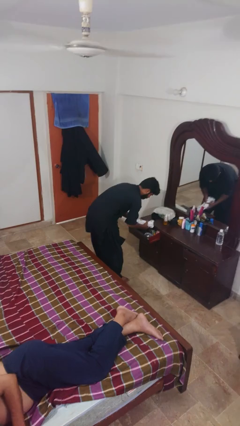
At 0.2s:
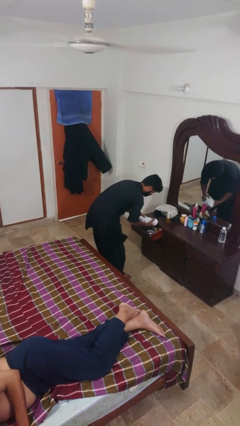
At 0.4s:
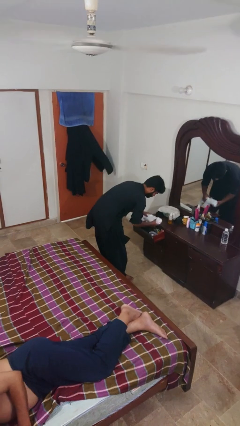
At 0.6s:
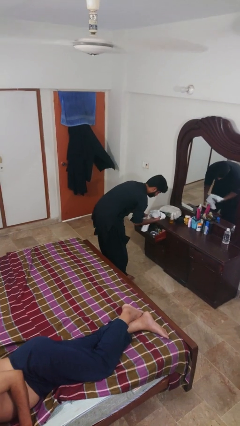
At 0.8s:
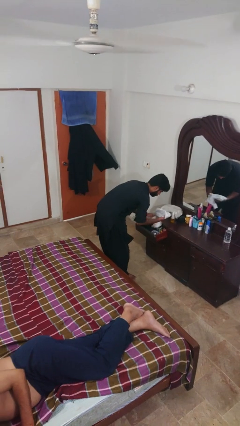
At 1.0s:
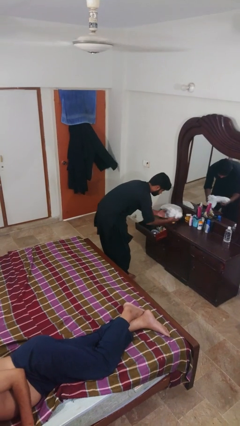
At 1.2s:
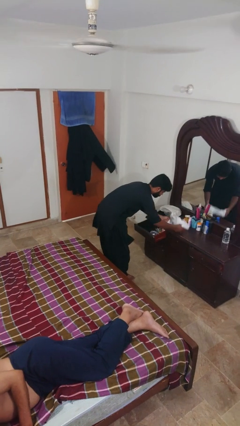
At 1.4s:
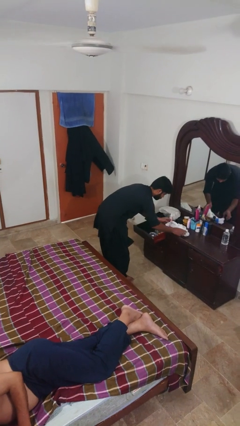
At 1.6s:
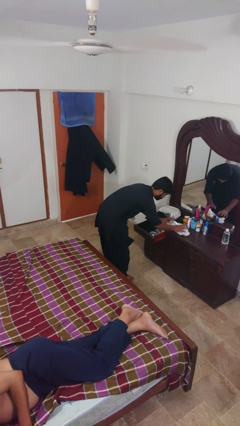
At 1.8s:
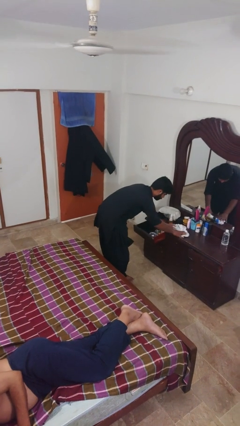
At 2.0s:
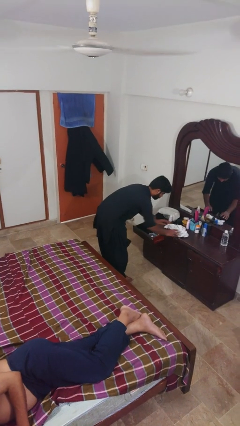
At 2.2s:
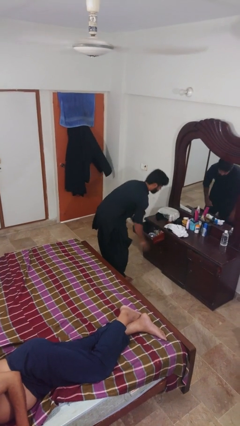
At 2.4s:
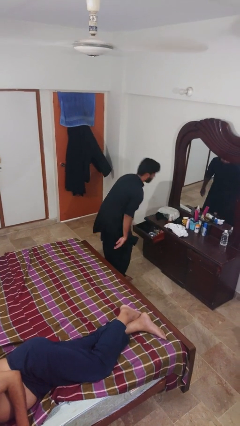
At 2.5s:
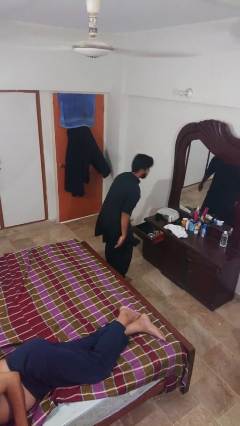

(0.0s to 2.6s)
person takes clothes from dresser

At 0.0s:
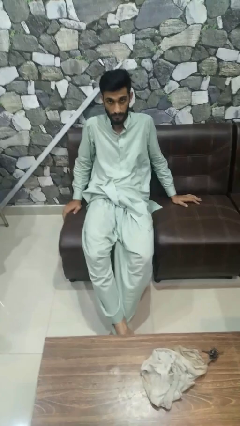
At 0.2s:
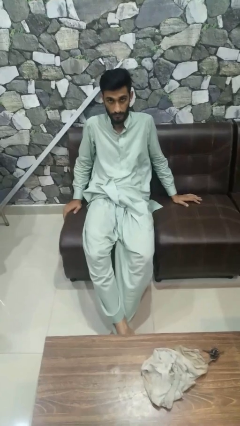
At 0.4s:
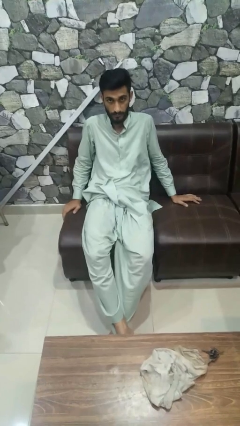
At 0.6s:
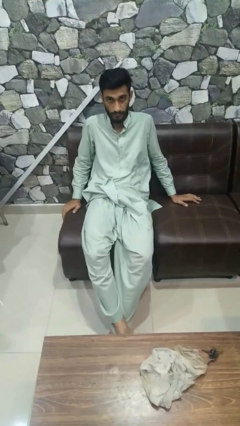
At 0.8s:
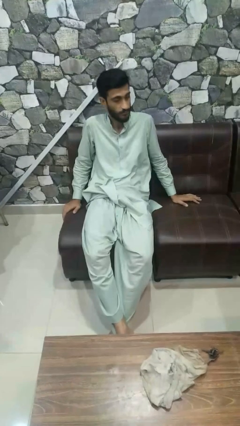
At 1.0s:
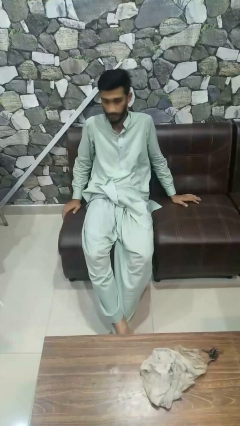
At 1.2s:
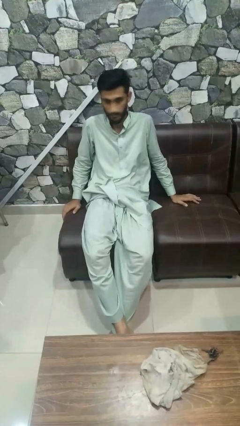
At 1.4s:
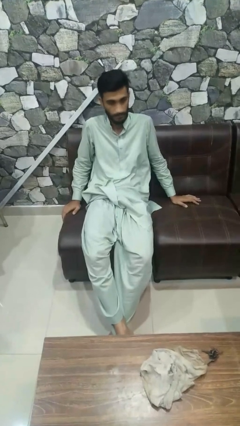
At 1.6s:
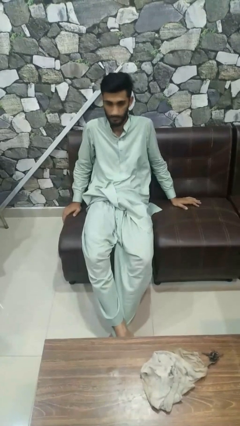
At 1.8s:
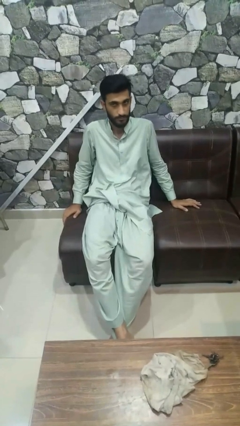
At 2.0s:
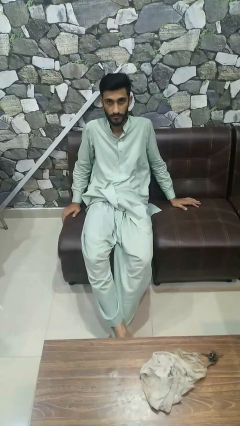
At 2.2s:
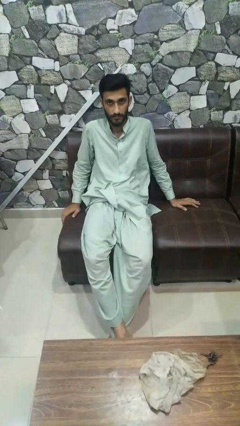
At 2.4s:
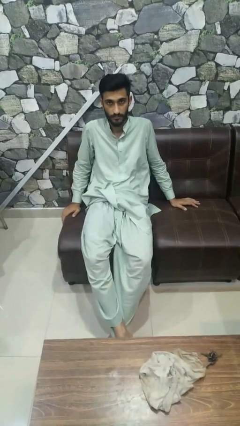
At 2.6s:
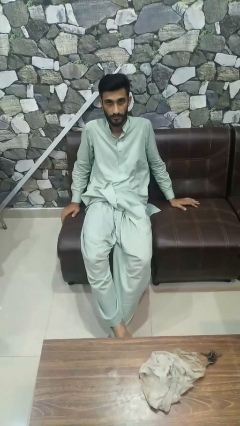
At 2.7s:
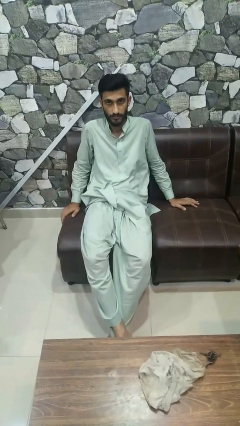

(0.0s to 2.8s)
person shakes head

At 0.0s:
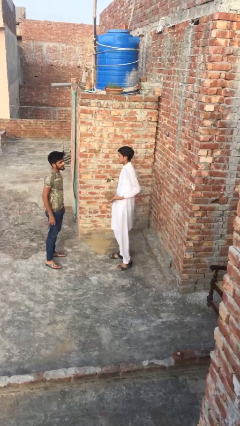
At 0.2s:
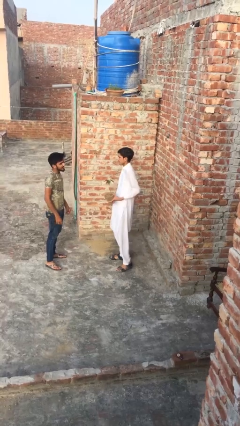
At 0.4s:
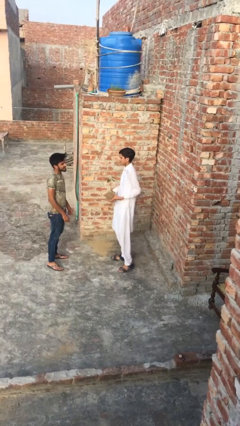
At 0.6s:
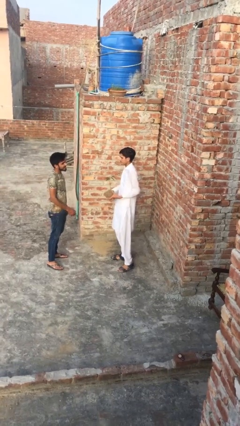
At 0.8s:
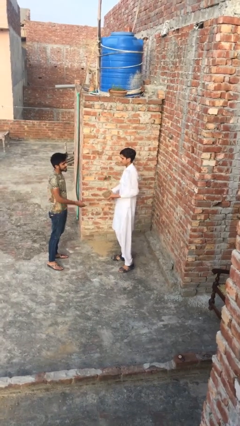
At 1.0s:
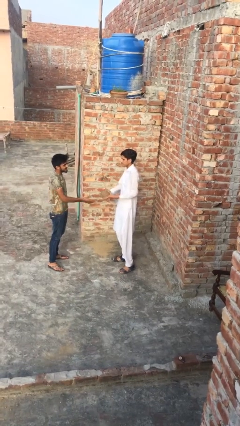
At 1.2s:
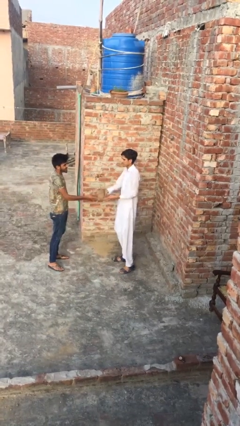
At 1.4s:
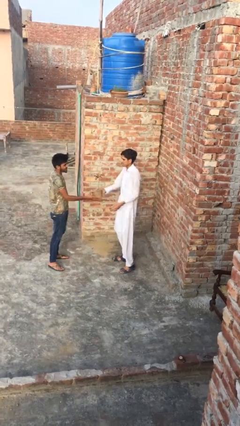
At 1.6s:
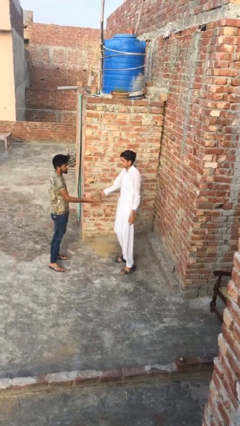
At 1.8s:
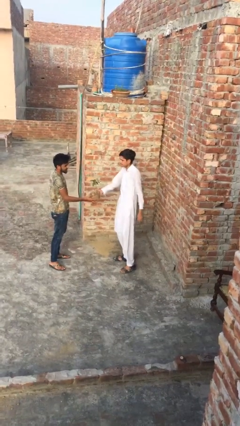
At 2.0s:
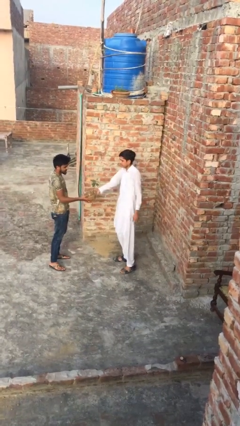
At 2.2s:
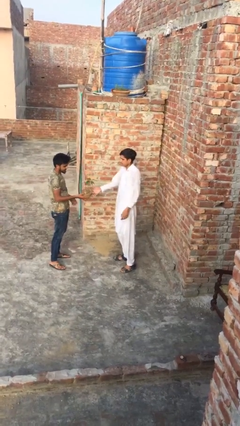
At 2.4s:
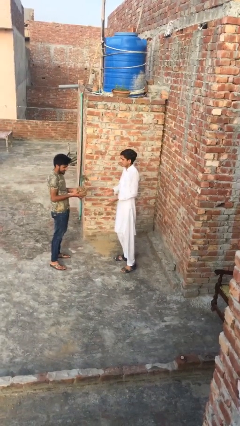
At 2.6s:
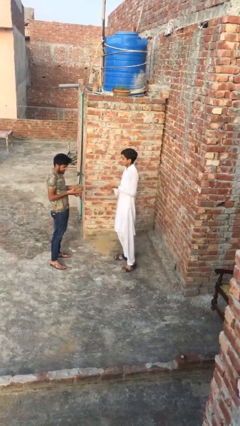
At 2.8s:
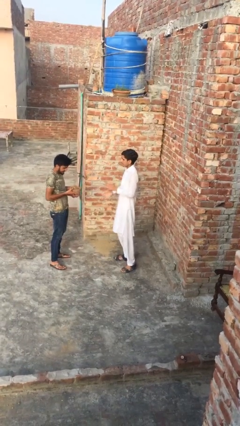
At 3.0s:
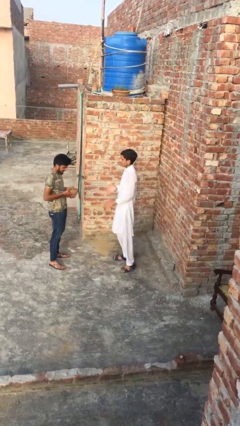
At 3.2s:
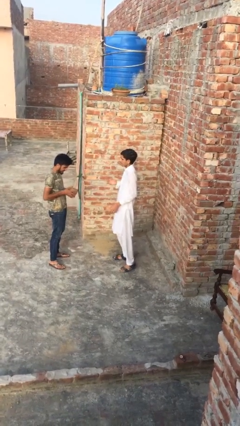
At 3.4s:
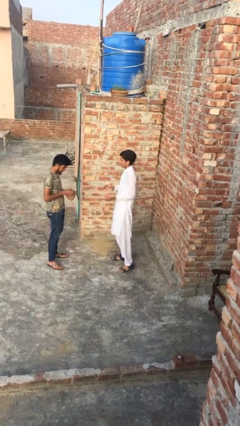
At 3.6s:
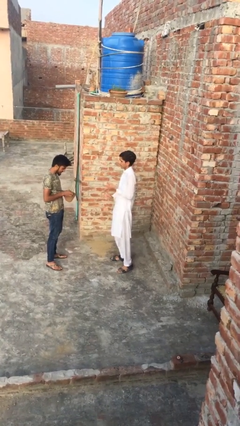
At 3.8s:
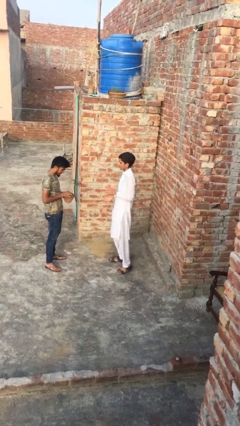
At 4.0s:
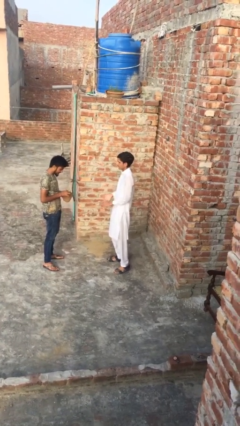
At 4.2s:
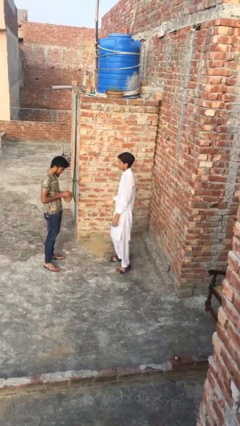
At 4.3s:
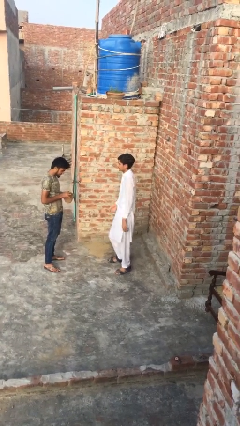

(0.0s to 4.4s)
person transfers object to person

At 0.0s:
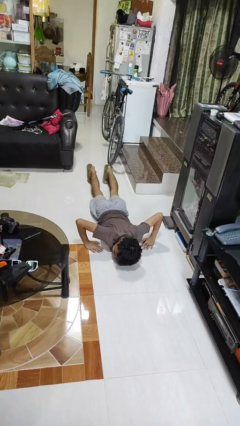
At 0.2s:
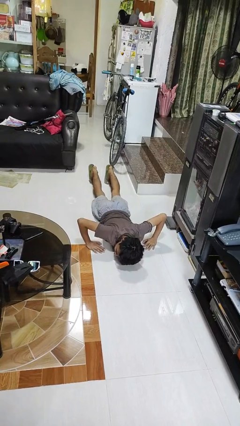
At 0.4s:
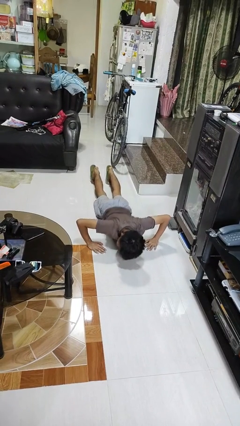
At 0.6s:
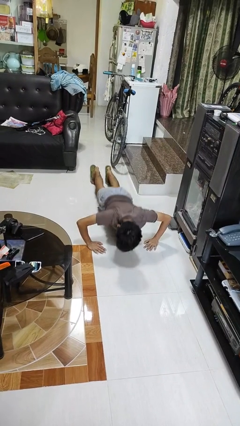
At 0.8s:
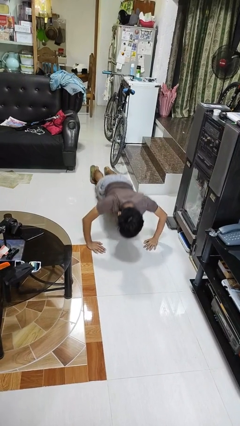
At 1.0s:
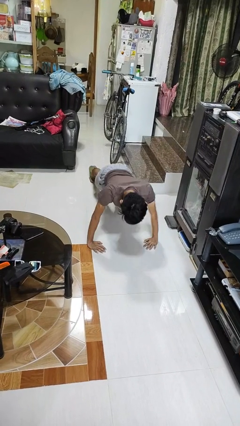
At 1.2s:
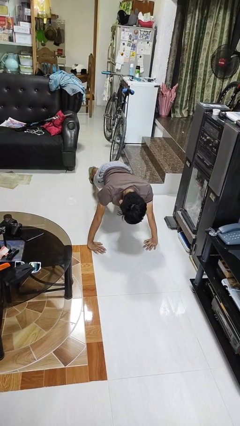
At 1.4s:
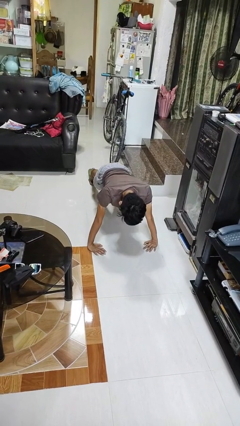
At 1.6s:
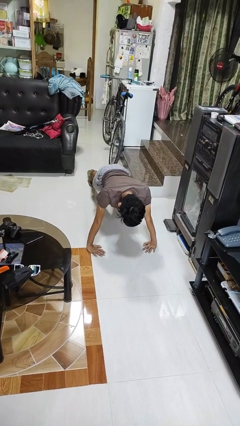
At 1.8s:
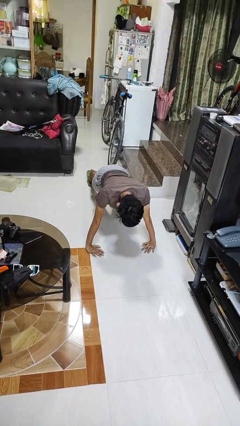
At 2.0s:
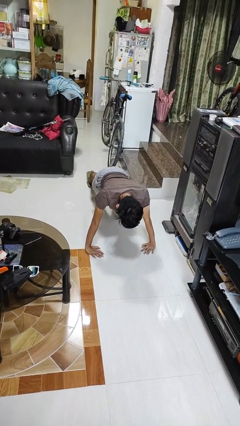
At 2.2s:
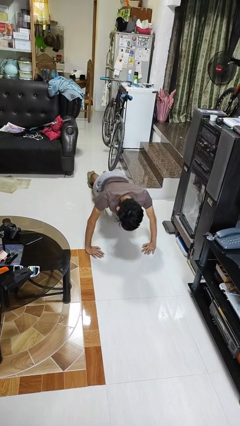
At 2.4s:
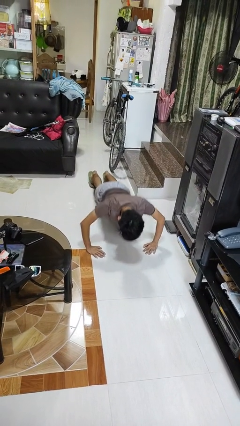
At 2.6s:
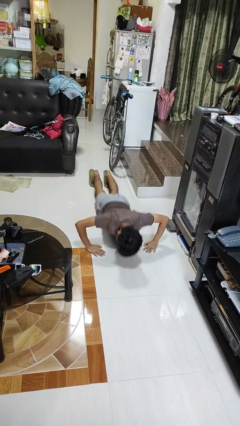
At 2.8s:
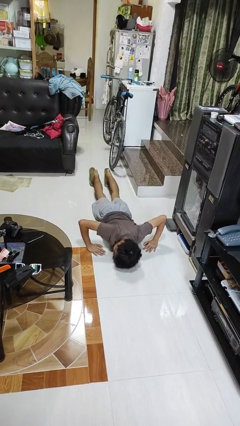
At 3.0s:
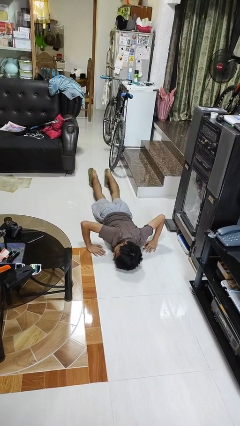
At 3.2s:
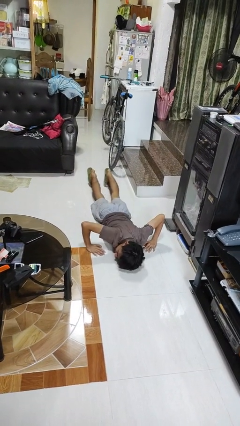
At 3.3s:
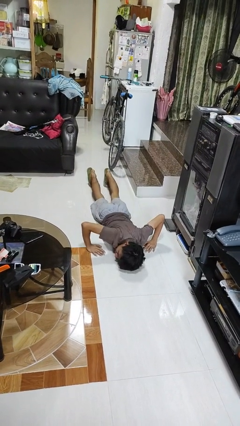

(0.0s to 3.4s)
person exercises with pushup

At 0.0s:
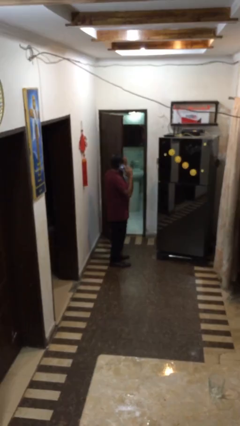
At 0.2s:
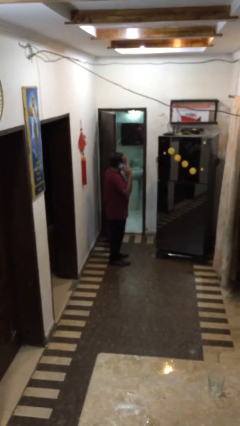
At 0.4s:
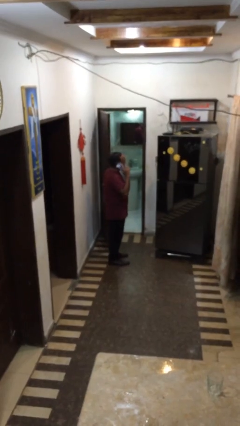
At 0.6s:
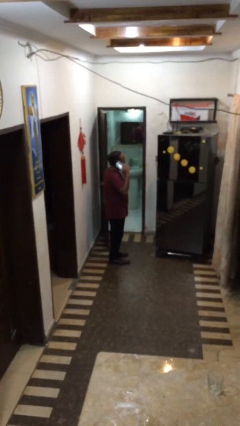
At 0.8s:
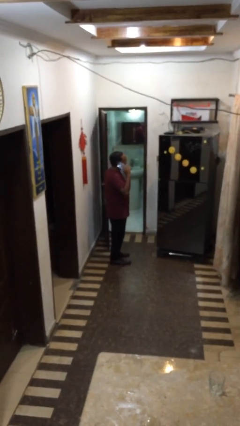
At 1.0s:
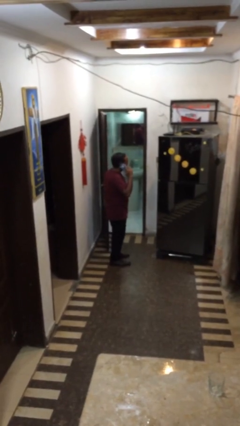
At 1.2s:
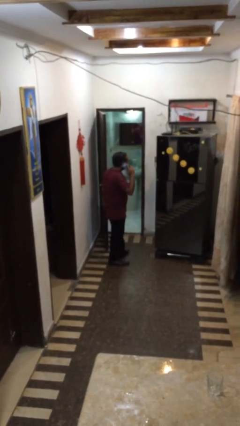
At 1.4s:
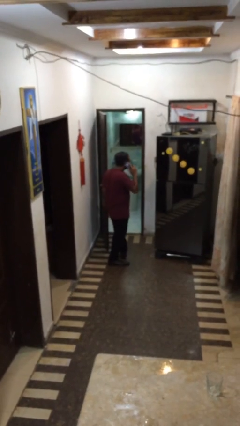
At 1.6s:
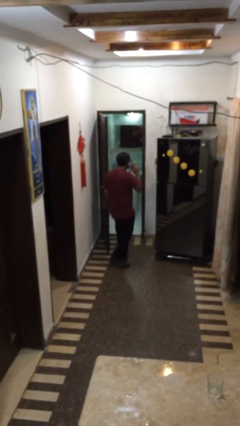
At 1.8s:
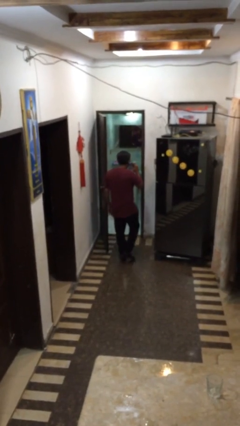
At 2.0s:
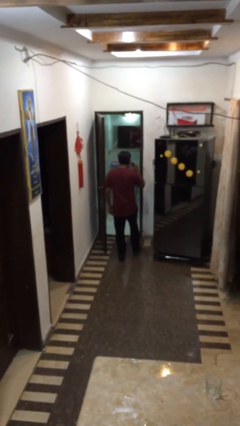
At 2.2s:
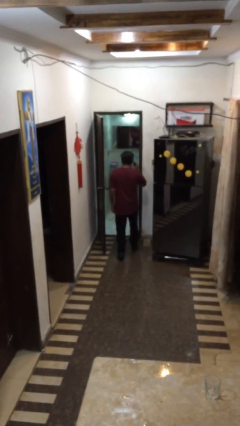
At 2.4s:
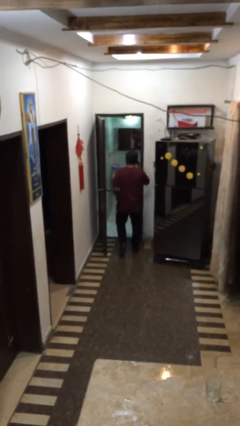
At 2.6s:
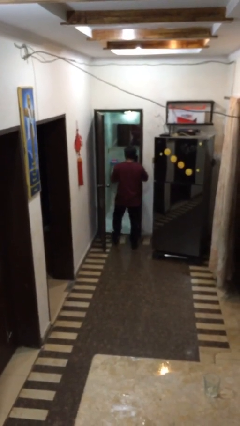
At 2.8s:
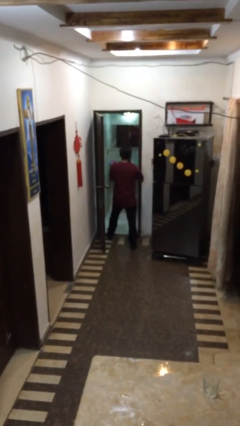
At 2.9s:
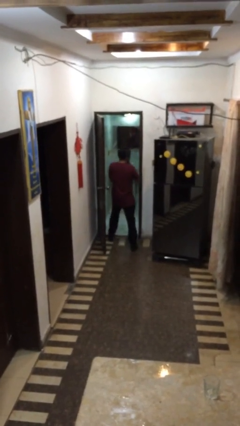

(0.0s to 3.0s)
person exits scene through structure

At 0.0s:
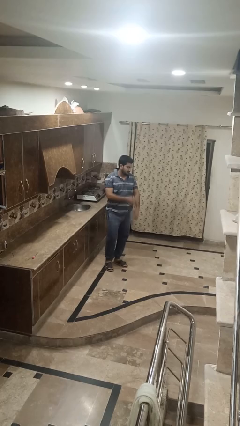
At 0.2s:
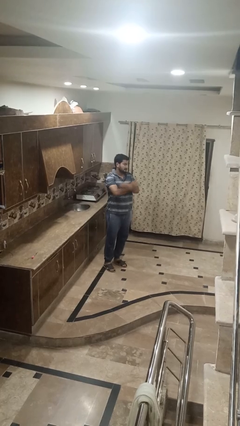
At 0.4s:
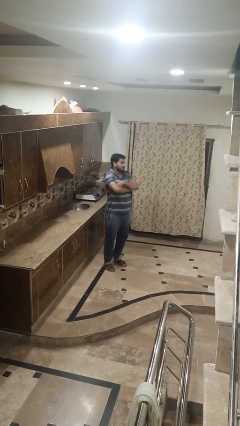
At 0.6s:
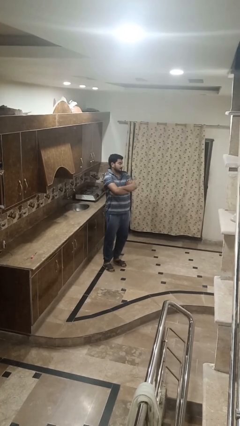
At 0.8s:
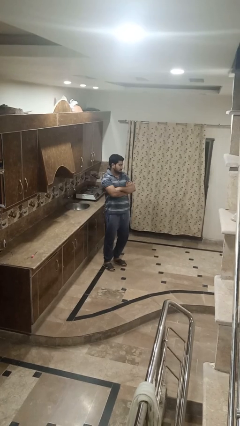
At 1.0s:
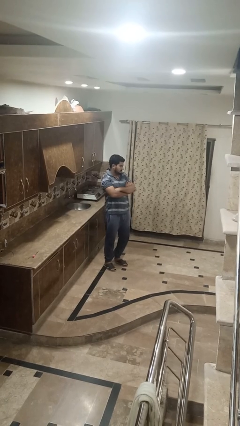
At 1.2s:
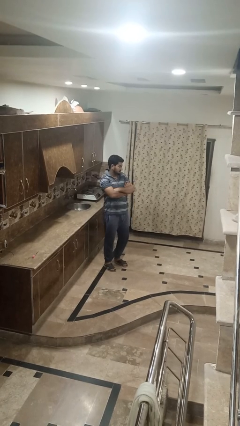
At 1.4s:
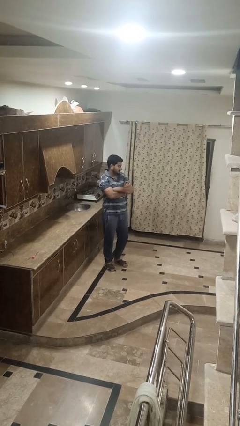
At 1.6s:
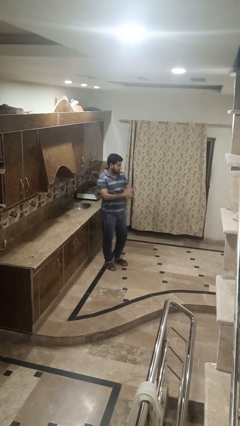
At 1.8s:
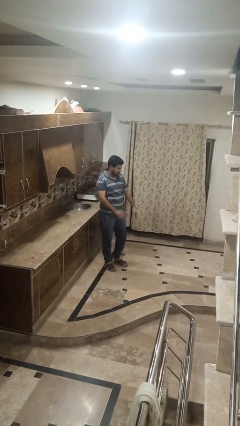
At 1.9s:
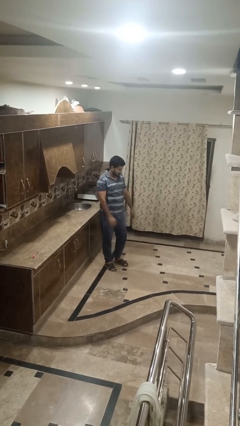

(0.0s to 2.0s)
person crosses arms
